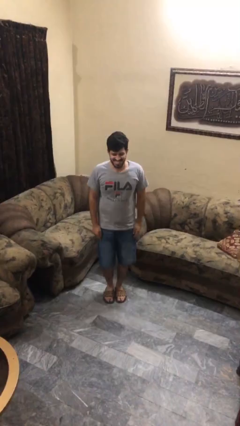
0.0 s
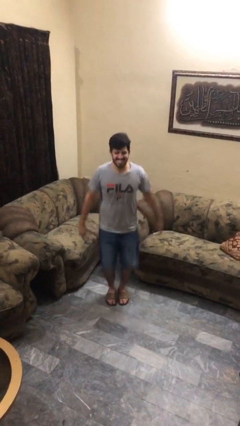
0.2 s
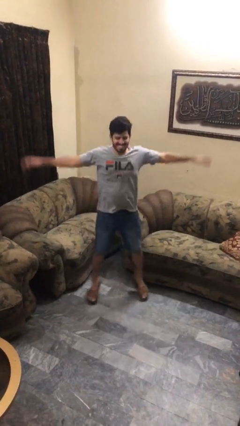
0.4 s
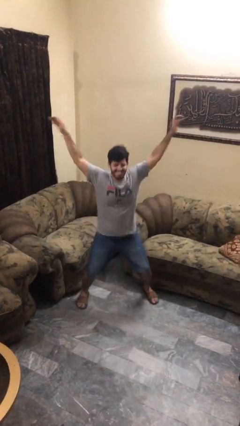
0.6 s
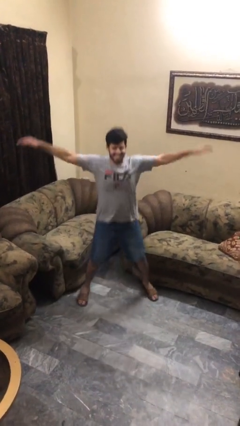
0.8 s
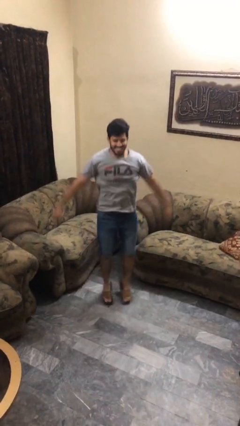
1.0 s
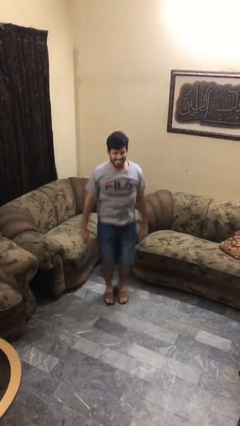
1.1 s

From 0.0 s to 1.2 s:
person exercises with jumping jacks

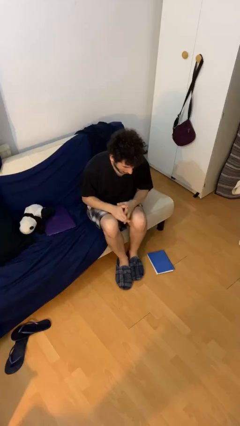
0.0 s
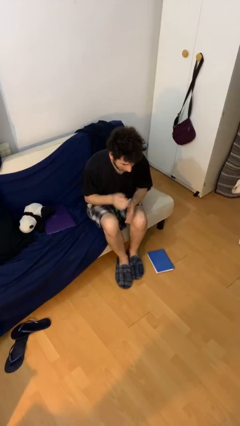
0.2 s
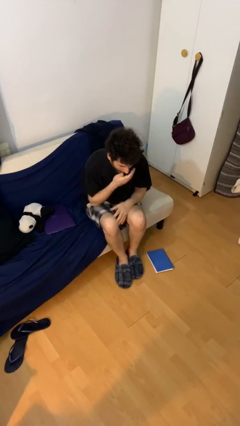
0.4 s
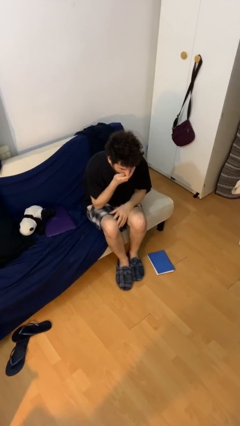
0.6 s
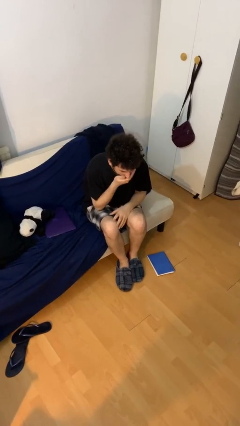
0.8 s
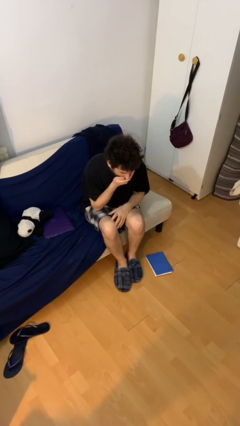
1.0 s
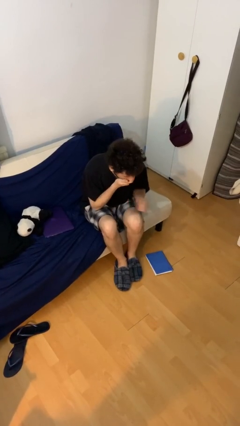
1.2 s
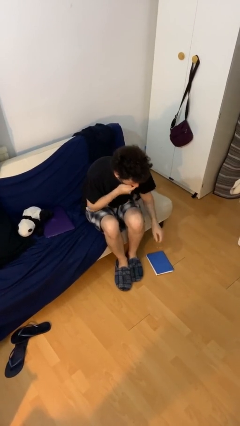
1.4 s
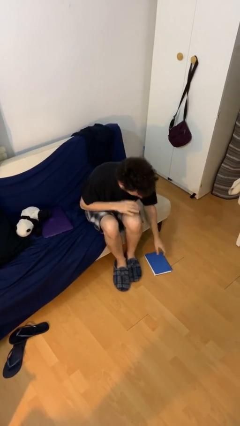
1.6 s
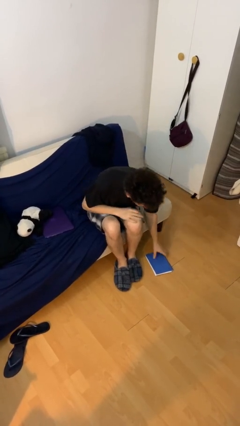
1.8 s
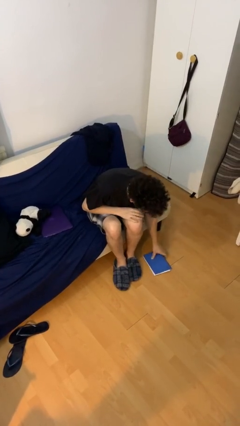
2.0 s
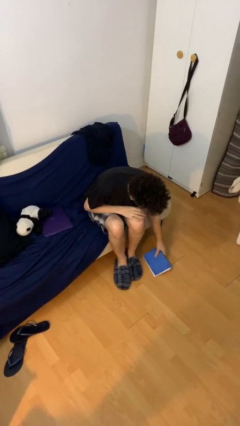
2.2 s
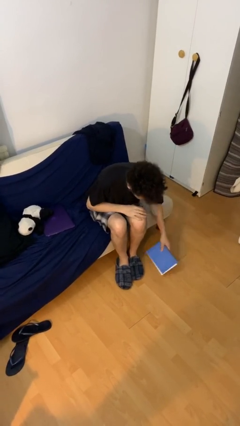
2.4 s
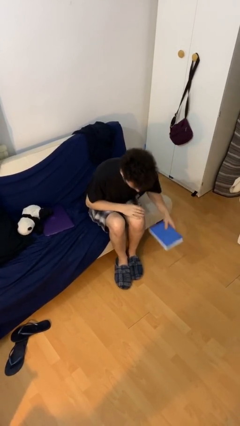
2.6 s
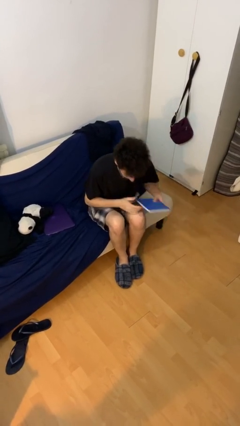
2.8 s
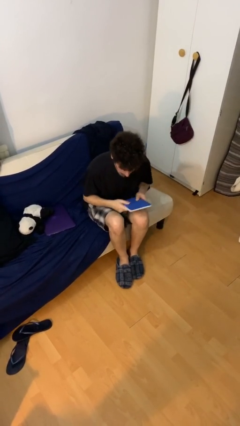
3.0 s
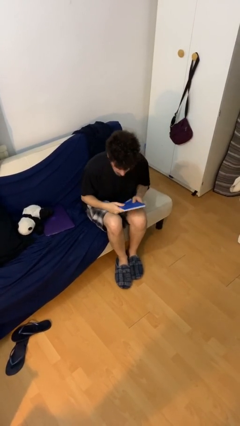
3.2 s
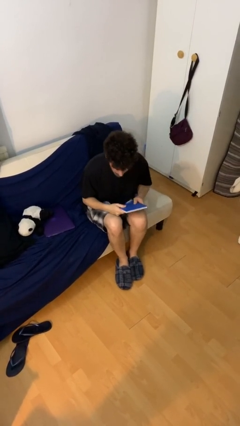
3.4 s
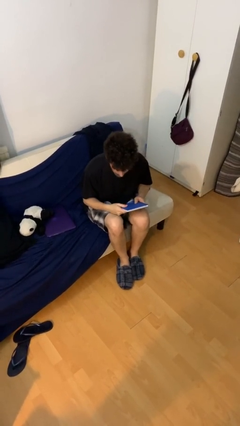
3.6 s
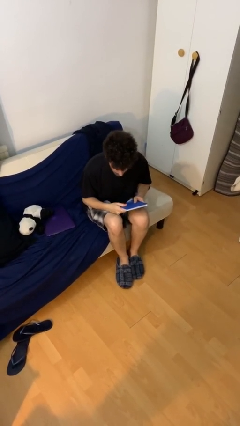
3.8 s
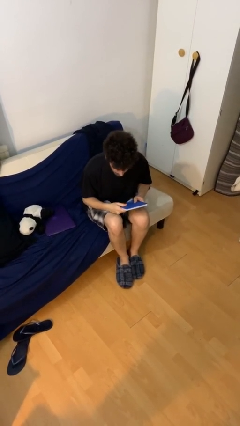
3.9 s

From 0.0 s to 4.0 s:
person picks up object from floor

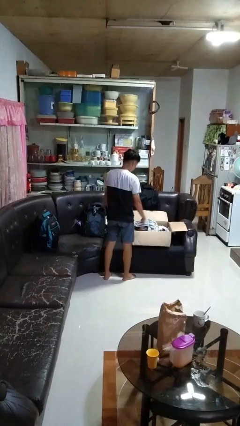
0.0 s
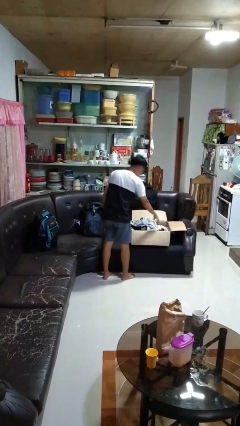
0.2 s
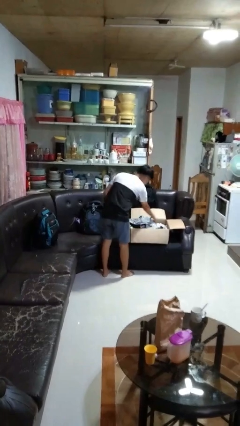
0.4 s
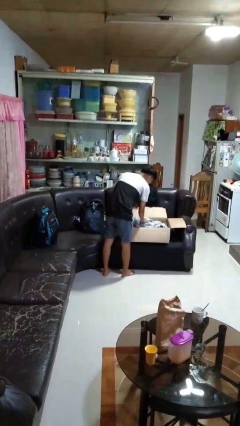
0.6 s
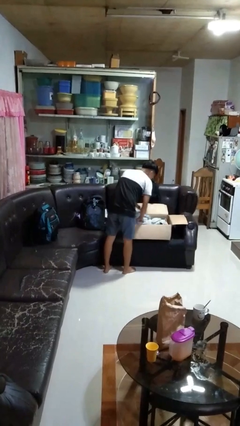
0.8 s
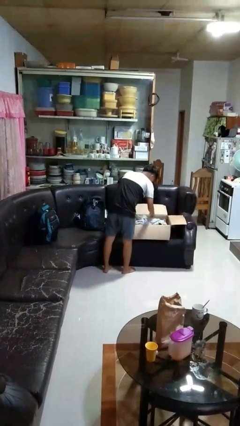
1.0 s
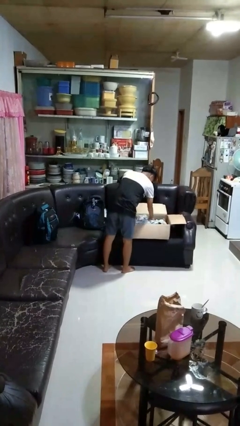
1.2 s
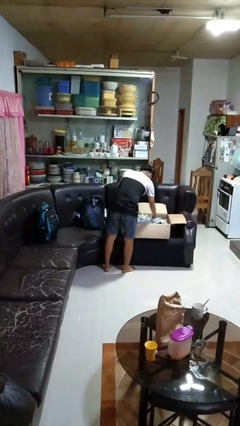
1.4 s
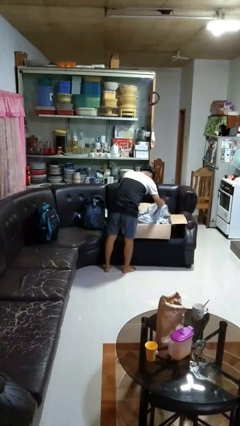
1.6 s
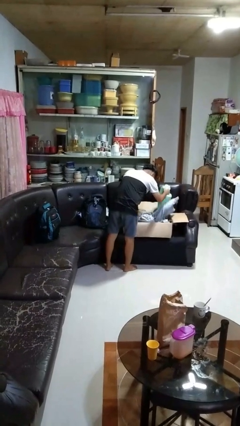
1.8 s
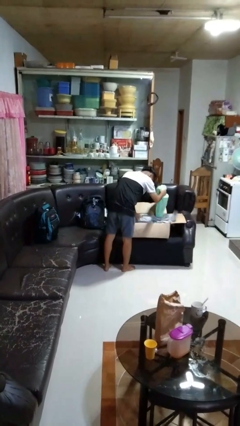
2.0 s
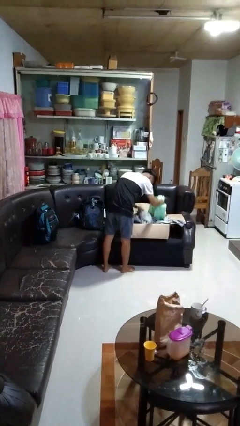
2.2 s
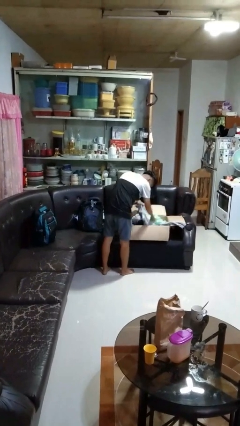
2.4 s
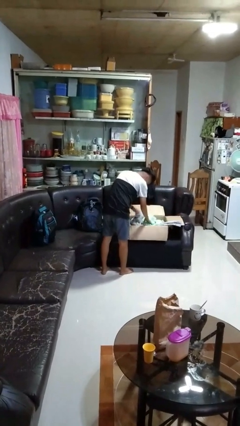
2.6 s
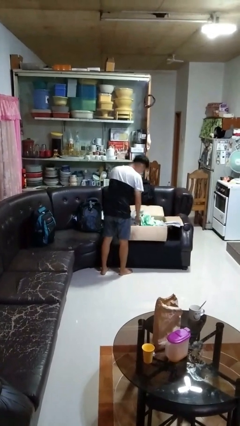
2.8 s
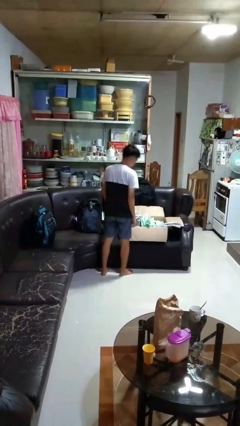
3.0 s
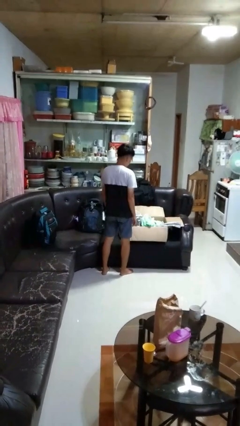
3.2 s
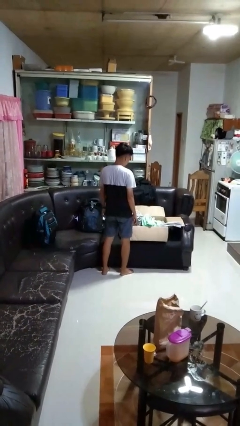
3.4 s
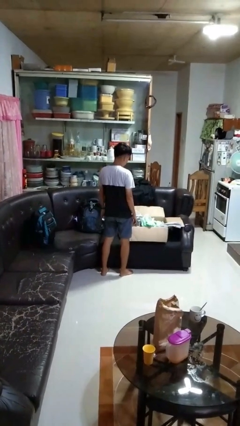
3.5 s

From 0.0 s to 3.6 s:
person searches in box

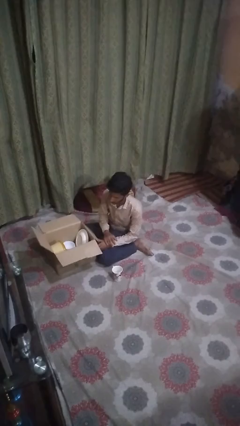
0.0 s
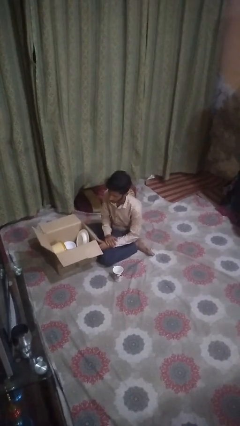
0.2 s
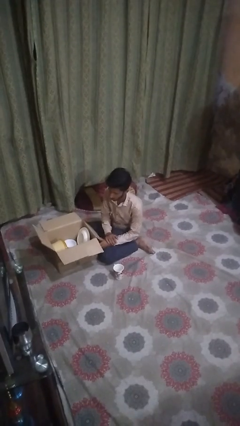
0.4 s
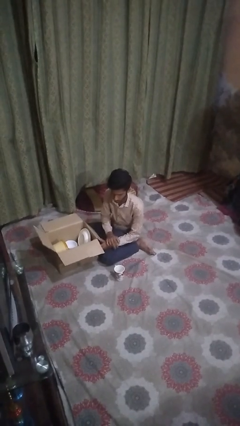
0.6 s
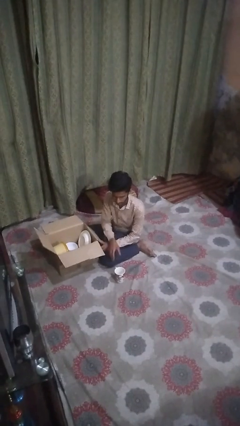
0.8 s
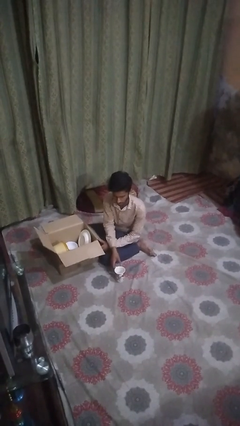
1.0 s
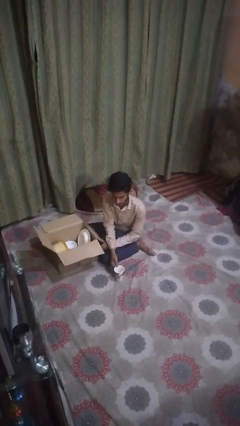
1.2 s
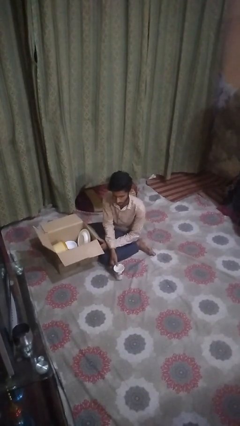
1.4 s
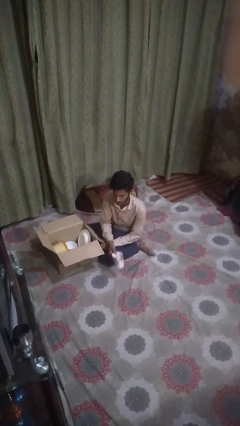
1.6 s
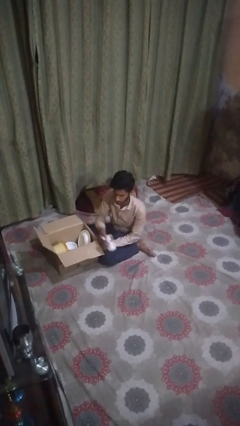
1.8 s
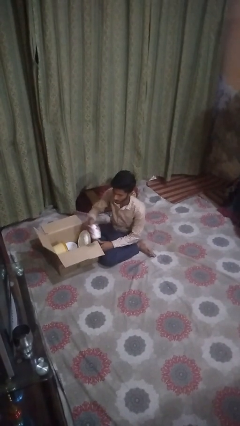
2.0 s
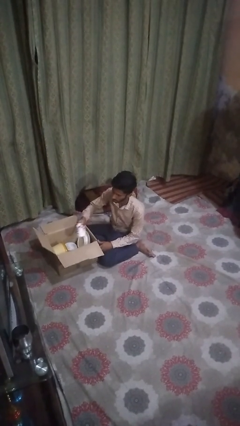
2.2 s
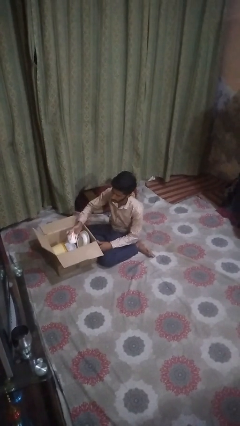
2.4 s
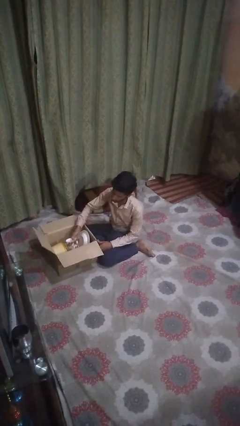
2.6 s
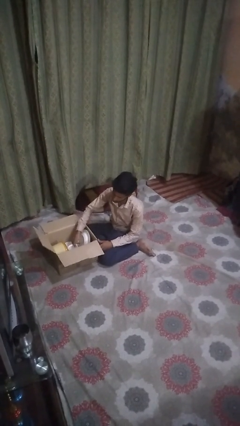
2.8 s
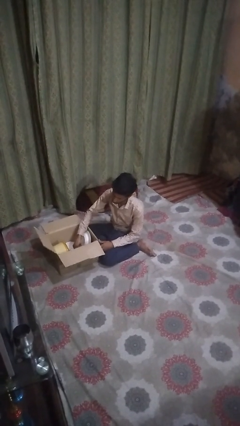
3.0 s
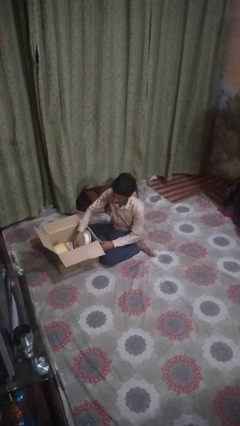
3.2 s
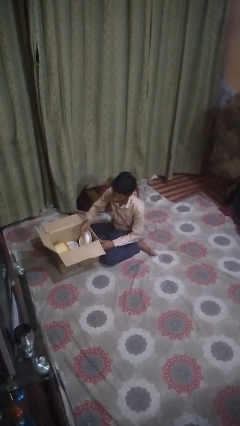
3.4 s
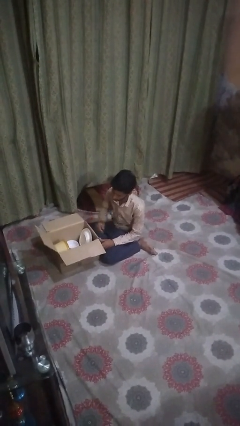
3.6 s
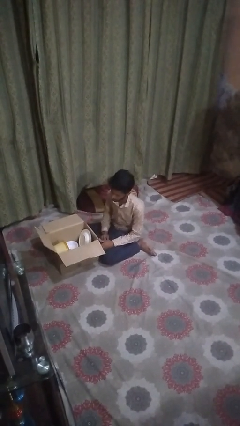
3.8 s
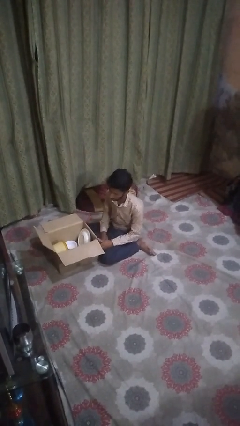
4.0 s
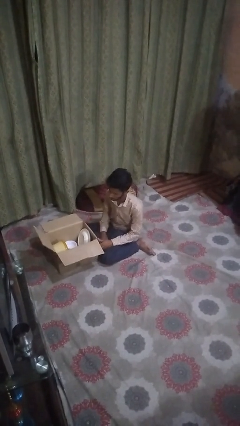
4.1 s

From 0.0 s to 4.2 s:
person puts object into box

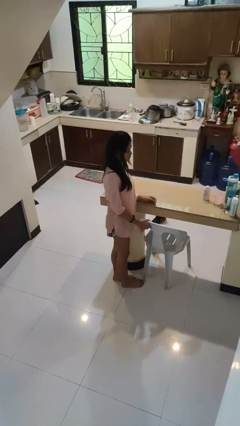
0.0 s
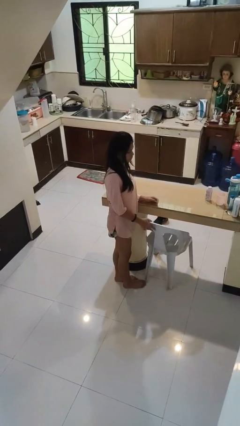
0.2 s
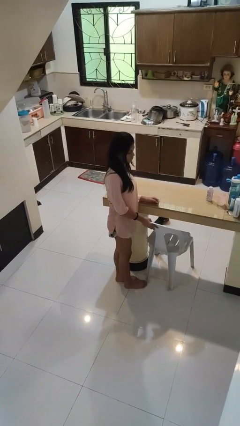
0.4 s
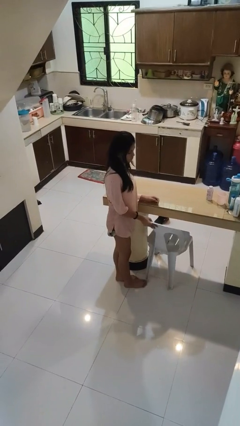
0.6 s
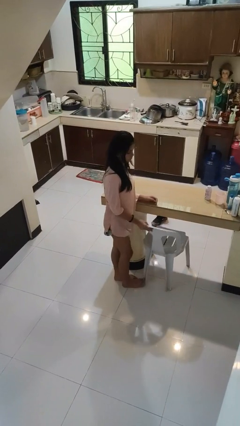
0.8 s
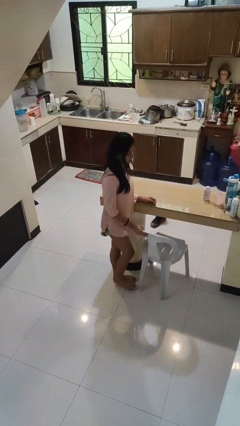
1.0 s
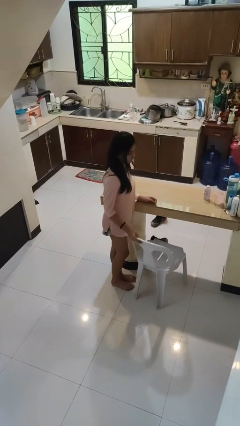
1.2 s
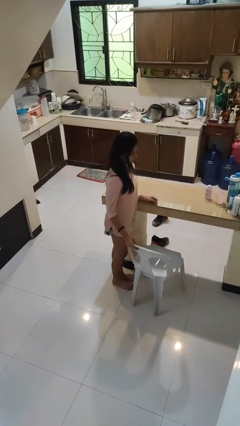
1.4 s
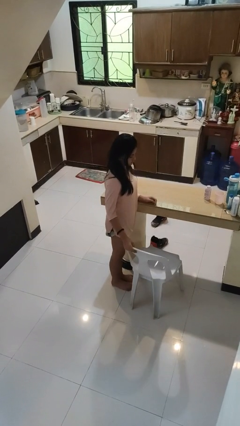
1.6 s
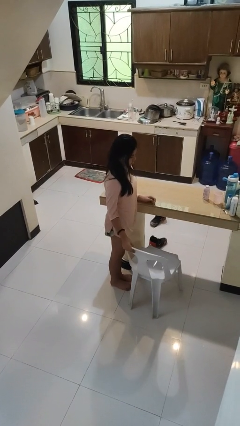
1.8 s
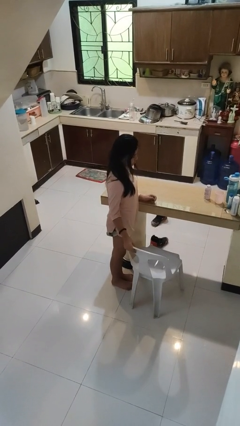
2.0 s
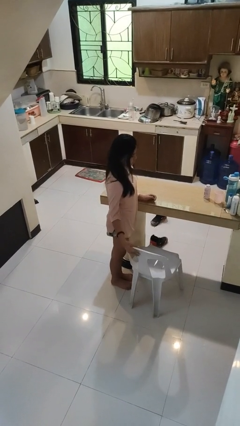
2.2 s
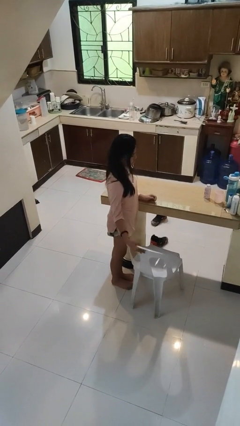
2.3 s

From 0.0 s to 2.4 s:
person pulls out chair

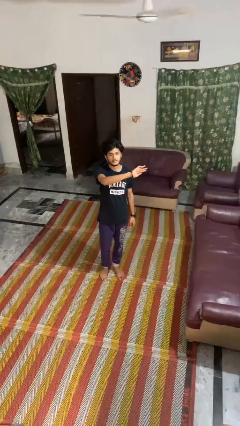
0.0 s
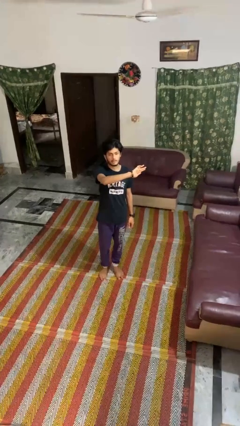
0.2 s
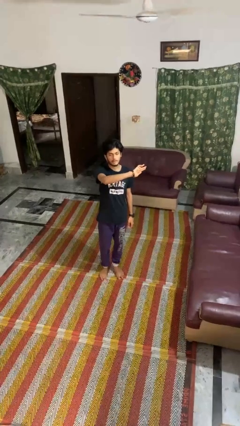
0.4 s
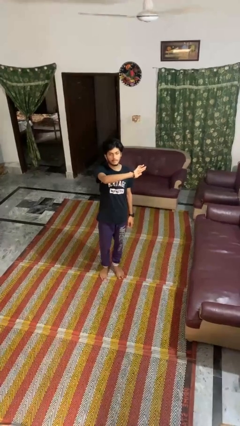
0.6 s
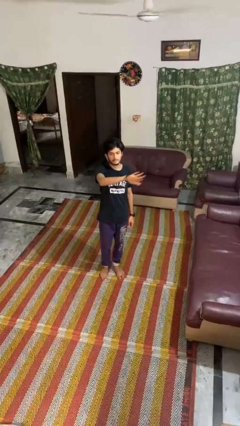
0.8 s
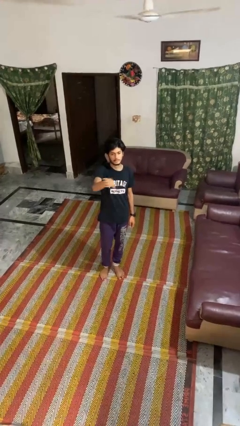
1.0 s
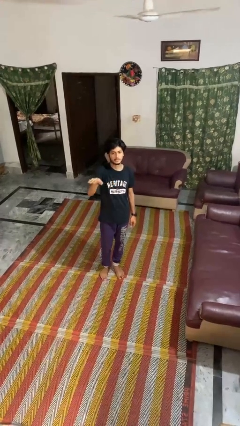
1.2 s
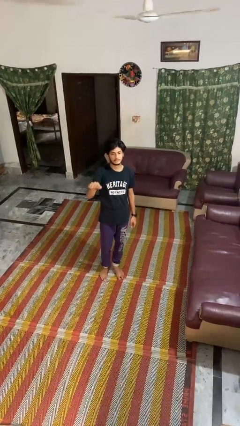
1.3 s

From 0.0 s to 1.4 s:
person gestures swipe right

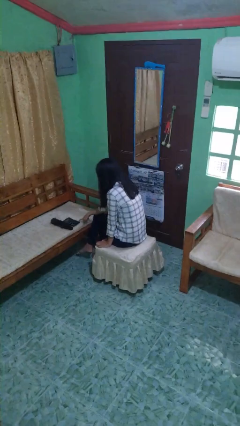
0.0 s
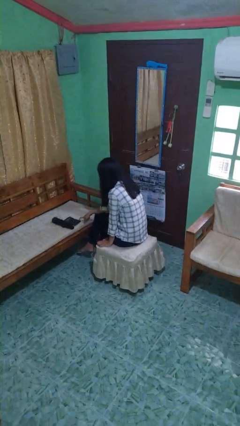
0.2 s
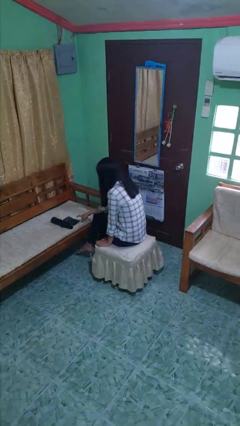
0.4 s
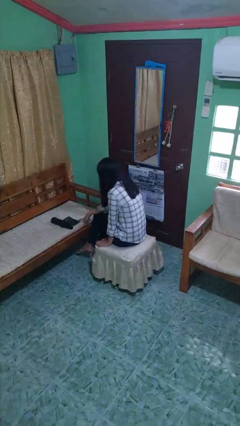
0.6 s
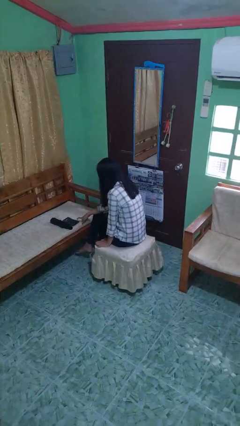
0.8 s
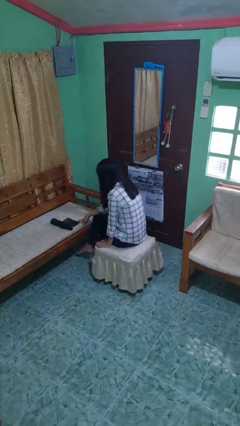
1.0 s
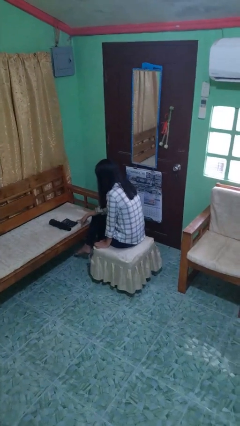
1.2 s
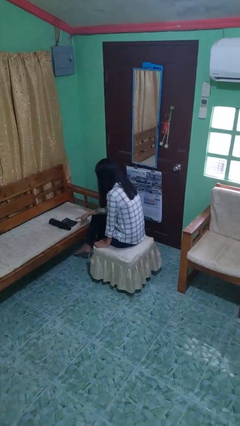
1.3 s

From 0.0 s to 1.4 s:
person taps object with finger
